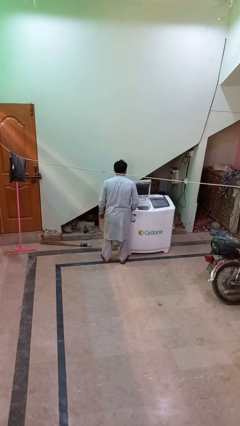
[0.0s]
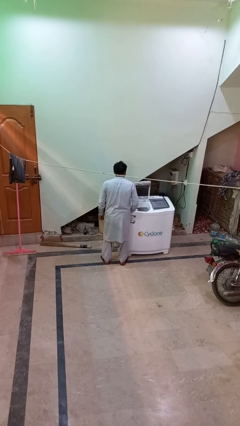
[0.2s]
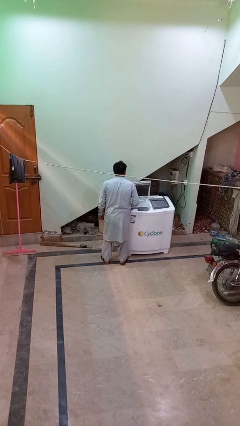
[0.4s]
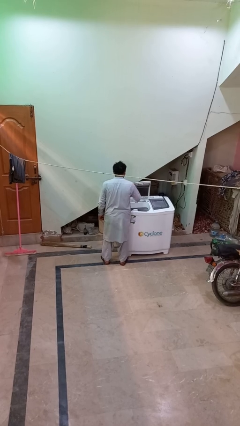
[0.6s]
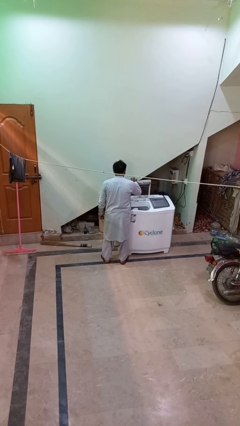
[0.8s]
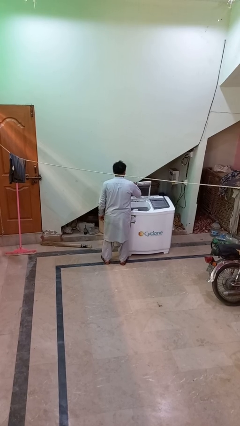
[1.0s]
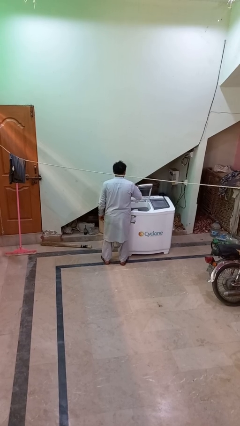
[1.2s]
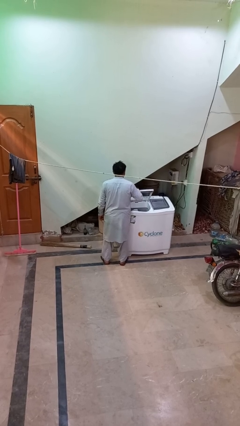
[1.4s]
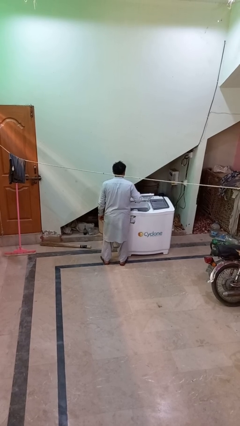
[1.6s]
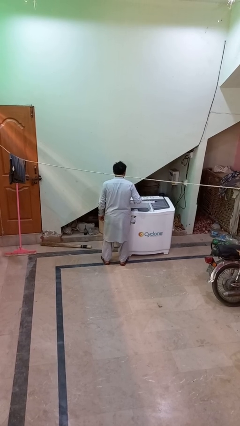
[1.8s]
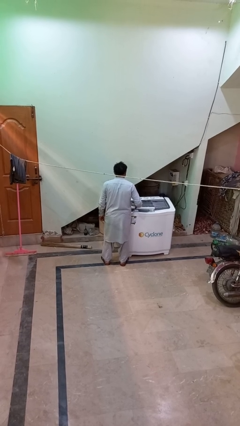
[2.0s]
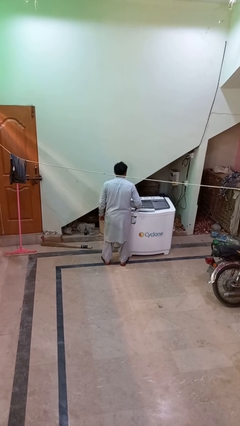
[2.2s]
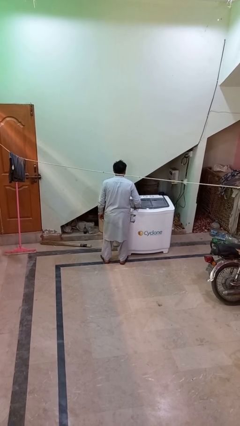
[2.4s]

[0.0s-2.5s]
person closes clothes washer

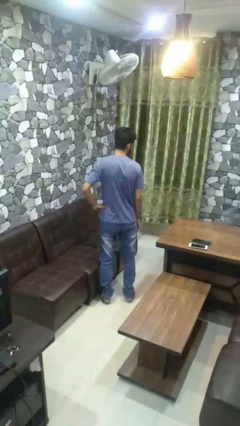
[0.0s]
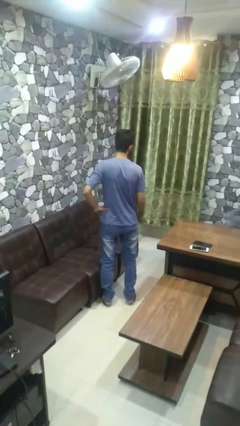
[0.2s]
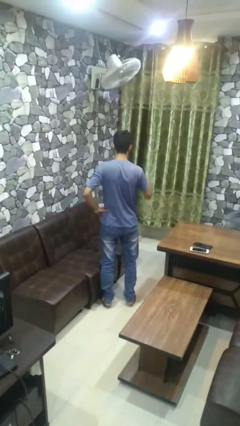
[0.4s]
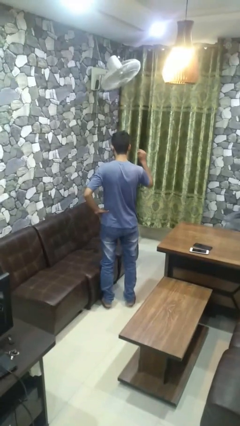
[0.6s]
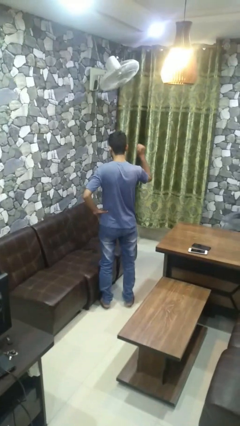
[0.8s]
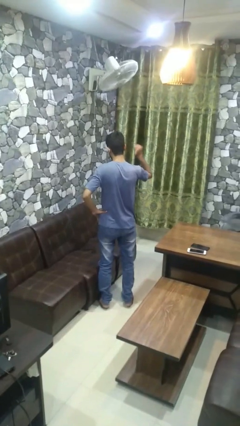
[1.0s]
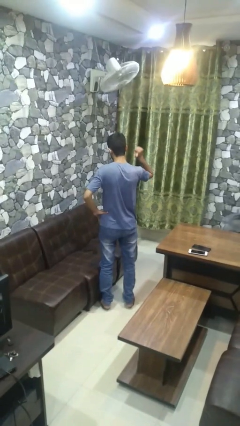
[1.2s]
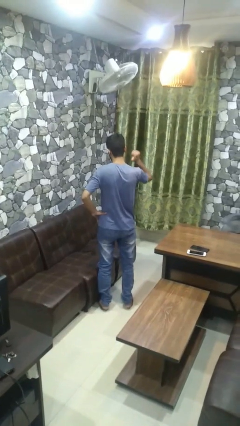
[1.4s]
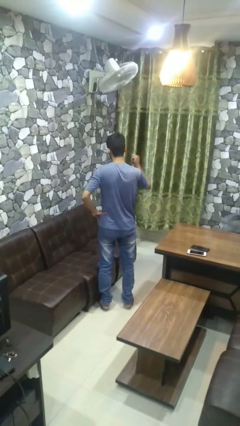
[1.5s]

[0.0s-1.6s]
person gestures behind me

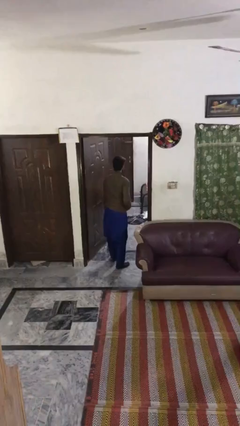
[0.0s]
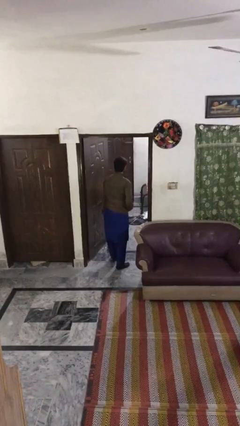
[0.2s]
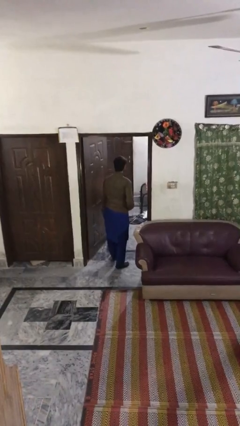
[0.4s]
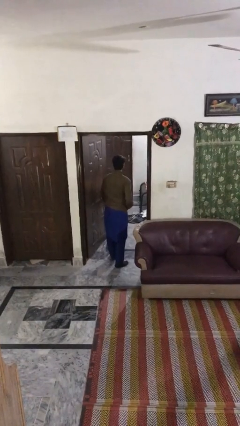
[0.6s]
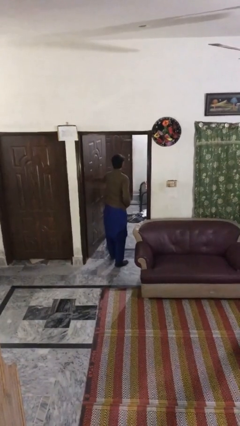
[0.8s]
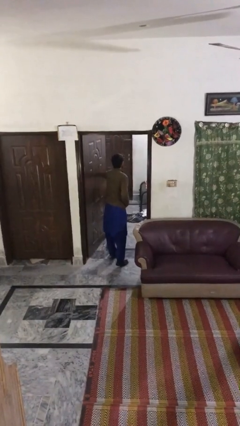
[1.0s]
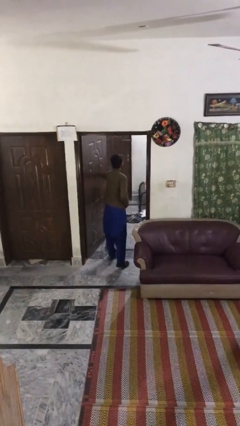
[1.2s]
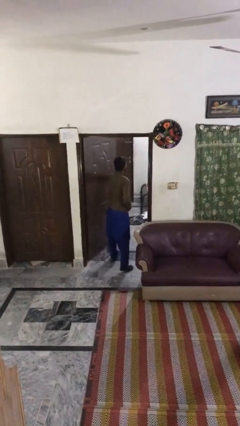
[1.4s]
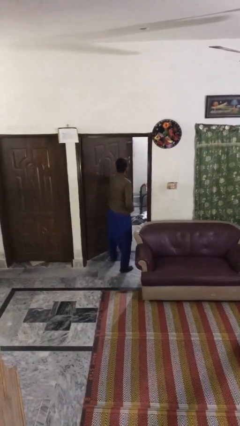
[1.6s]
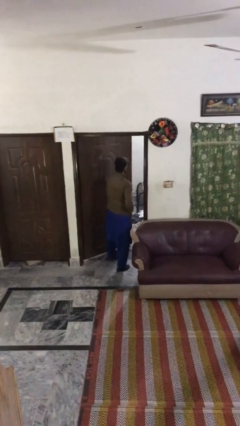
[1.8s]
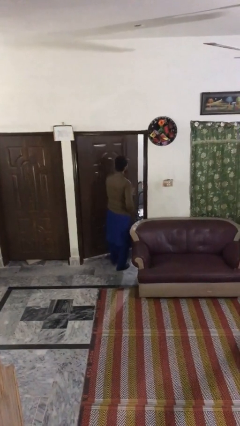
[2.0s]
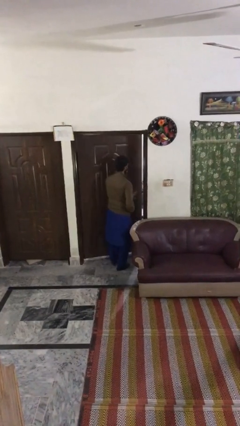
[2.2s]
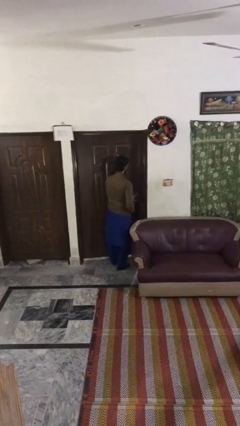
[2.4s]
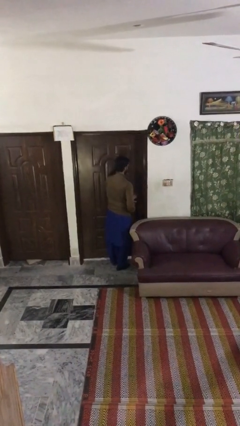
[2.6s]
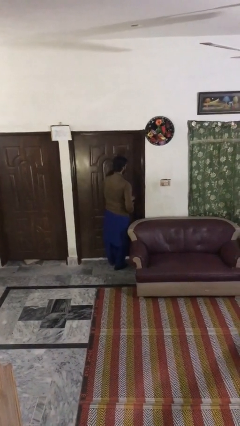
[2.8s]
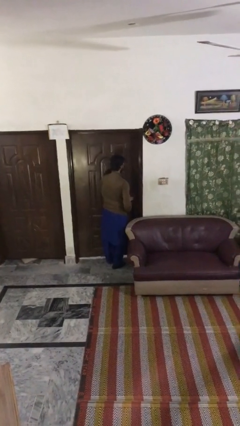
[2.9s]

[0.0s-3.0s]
person closes facility door

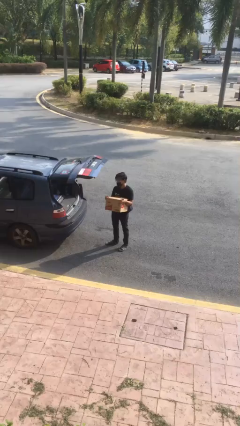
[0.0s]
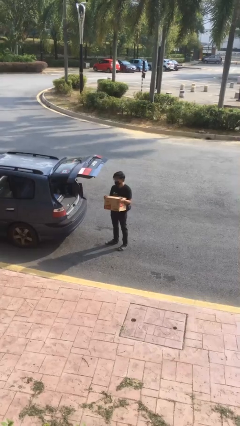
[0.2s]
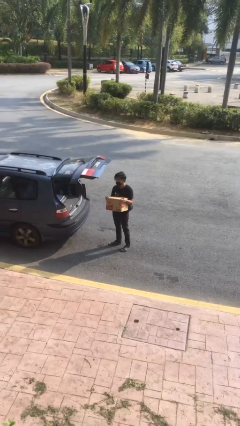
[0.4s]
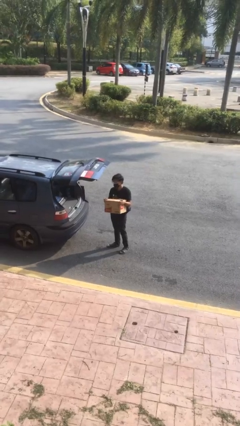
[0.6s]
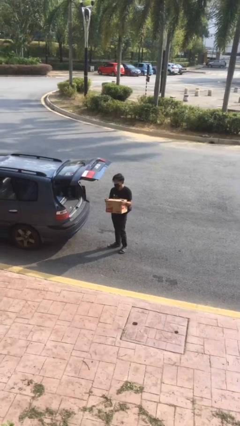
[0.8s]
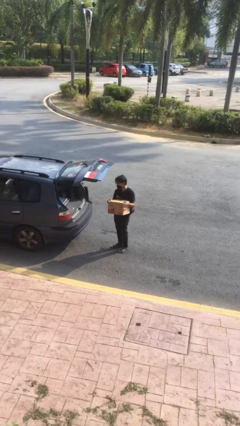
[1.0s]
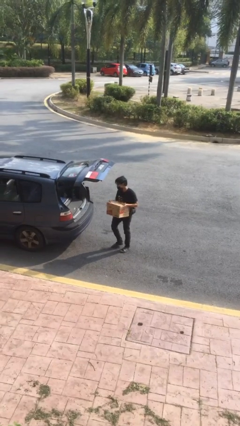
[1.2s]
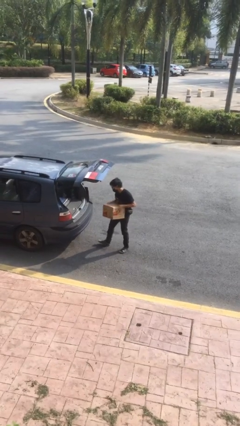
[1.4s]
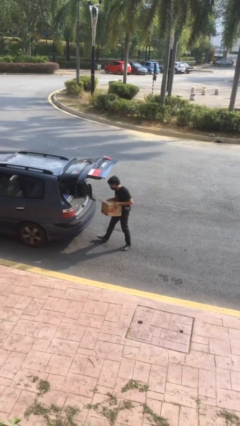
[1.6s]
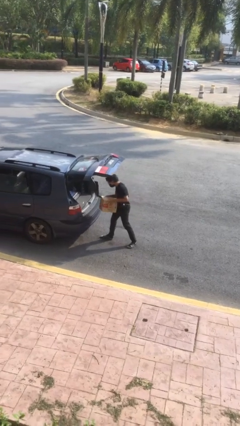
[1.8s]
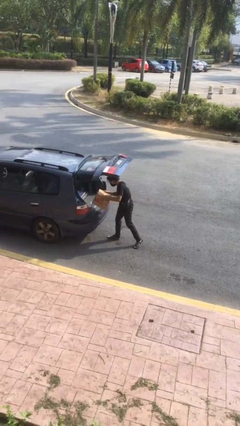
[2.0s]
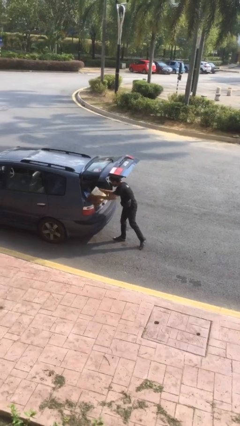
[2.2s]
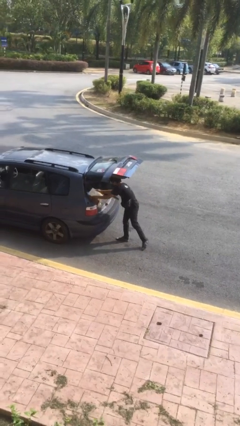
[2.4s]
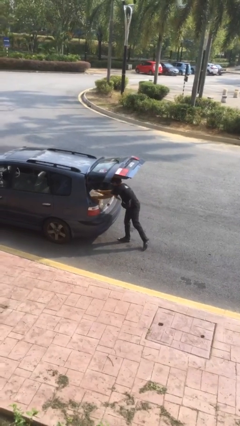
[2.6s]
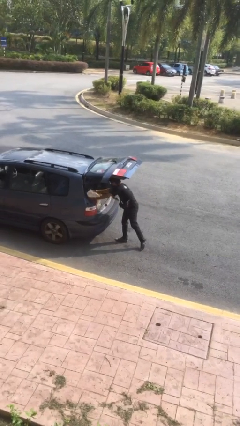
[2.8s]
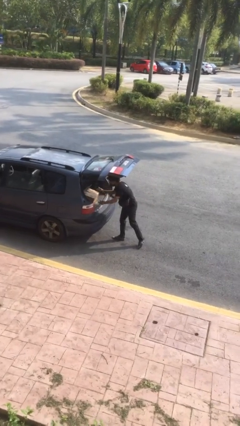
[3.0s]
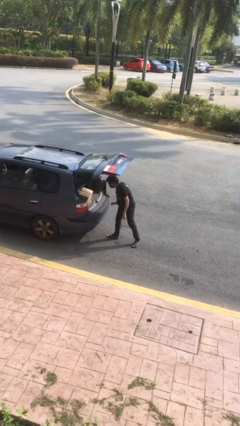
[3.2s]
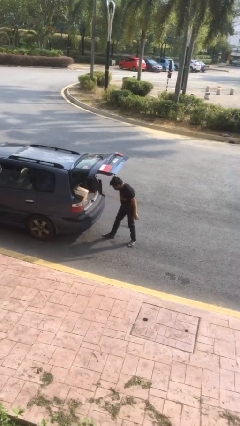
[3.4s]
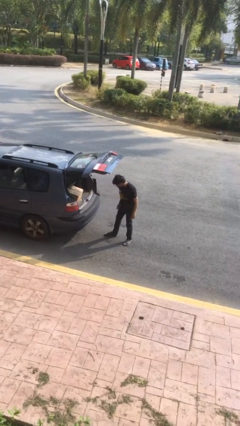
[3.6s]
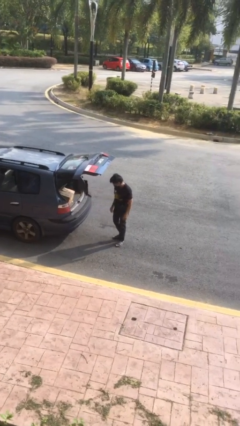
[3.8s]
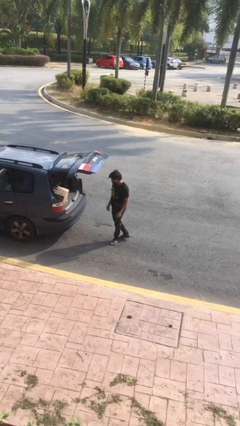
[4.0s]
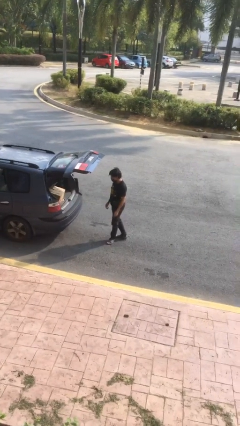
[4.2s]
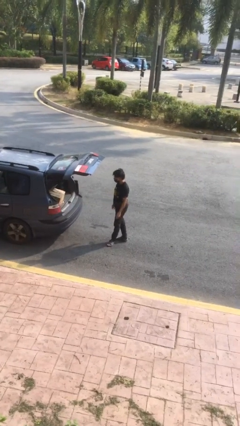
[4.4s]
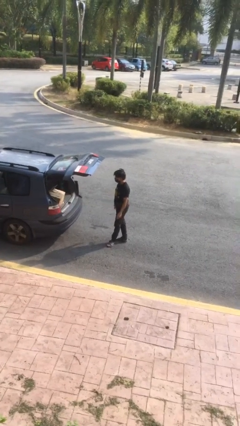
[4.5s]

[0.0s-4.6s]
person loads car

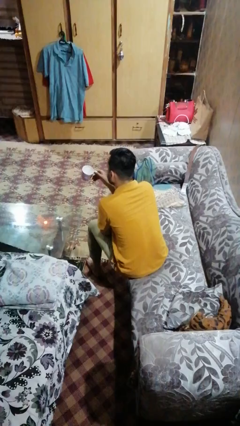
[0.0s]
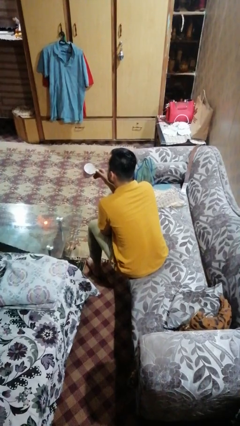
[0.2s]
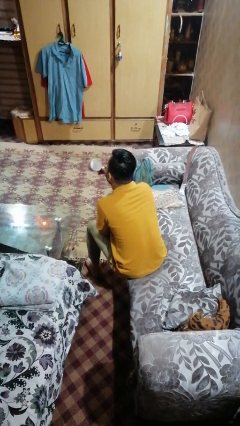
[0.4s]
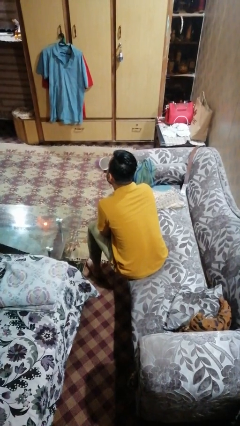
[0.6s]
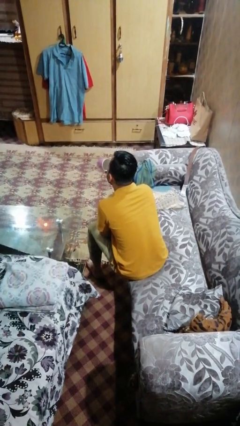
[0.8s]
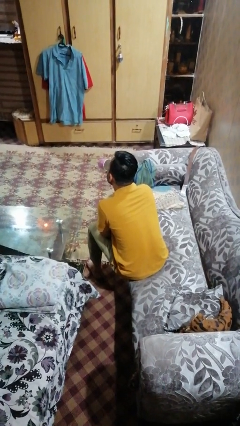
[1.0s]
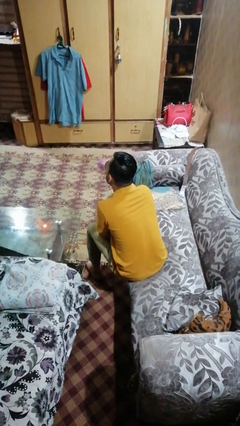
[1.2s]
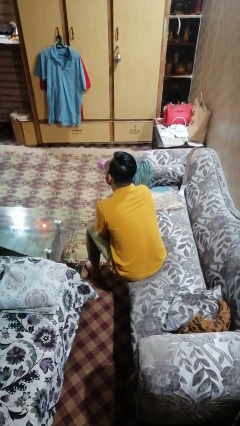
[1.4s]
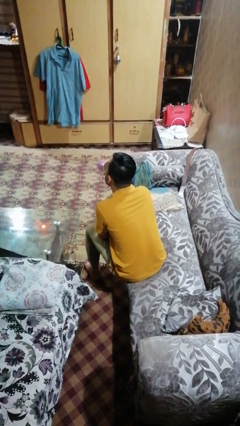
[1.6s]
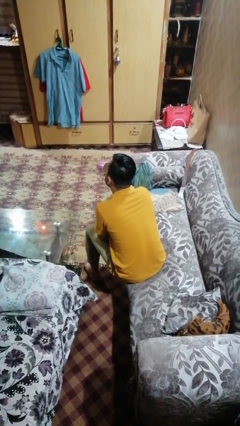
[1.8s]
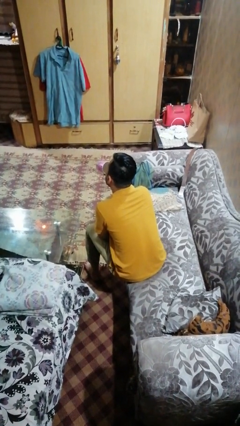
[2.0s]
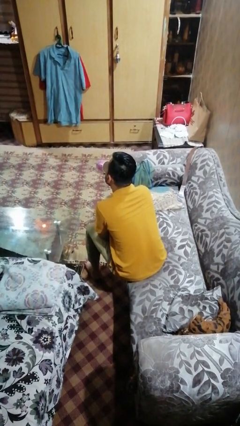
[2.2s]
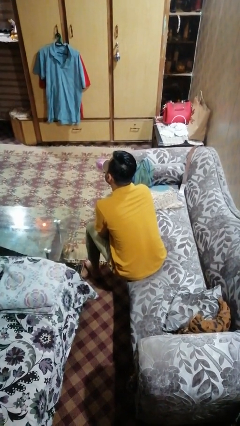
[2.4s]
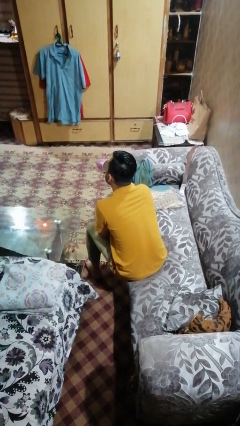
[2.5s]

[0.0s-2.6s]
person drinks from mug

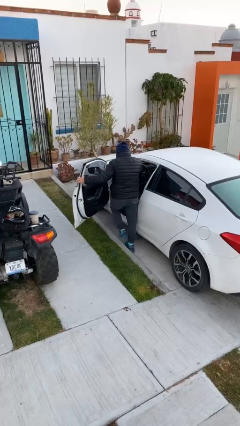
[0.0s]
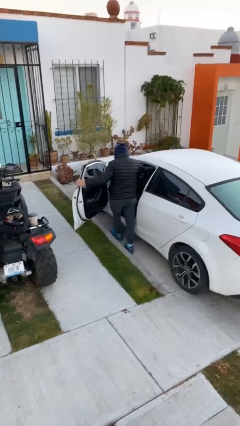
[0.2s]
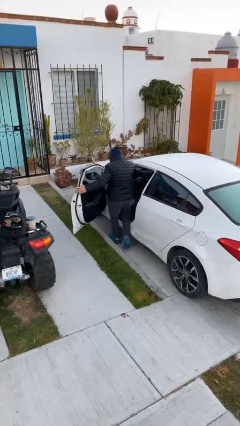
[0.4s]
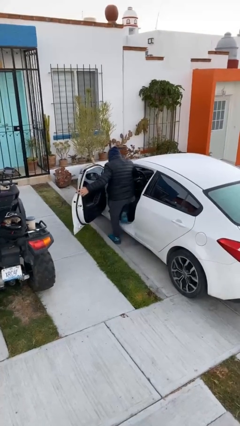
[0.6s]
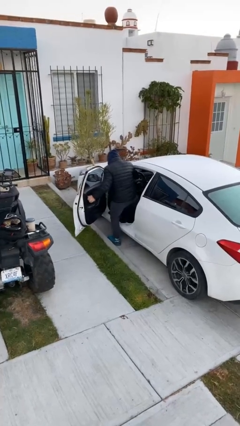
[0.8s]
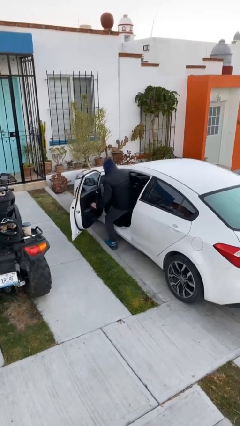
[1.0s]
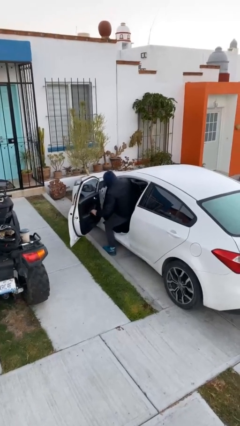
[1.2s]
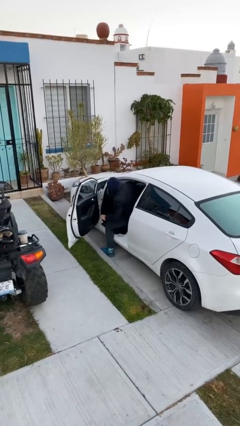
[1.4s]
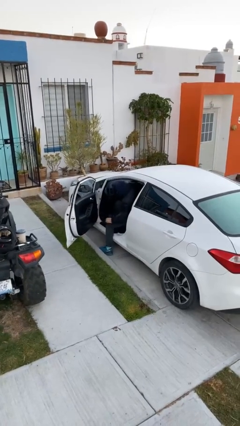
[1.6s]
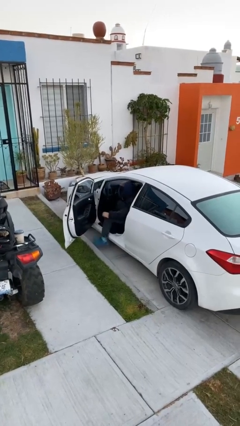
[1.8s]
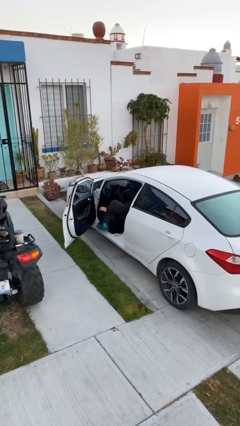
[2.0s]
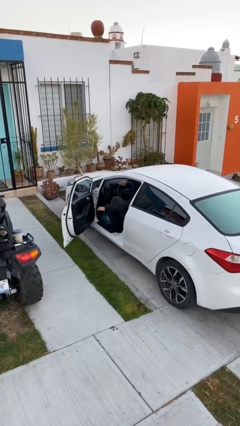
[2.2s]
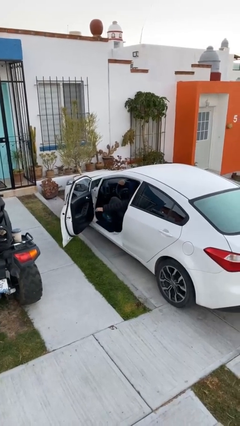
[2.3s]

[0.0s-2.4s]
person enters car

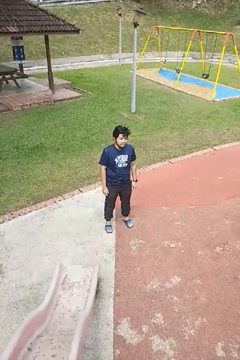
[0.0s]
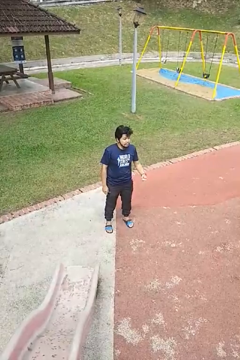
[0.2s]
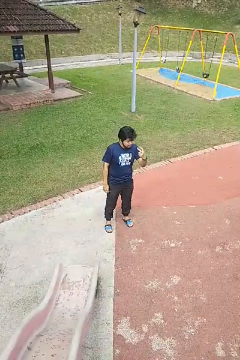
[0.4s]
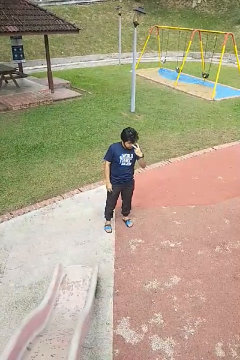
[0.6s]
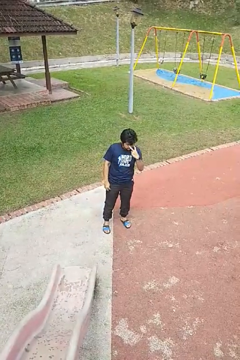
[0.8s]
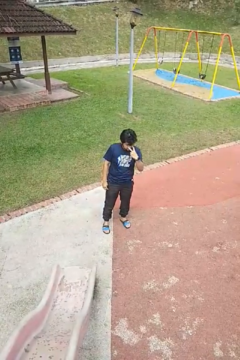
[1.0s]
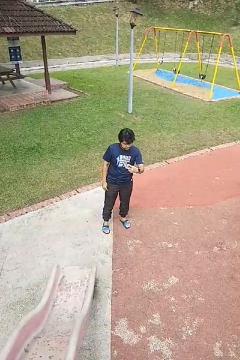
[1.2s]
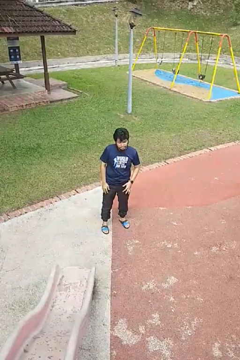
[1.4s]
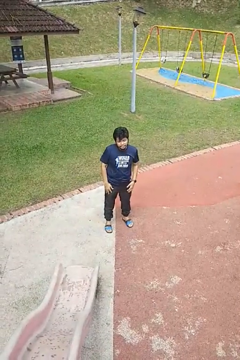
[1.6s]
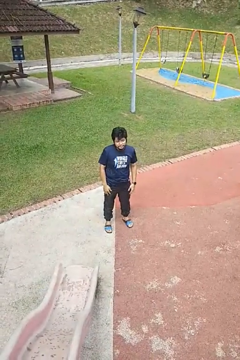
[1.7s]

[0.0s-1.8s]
person gestures watch closely
